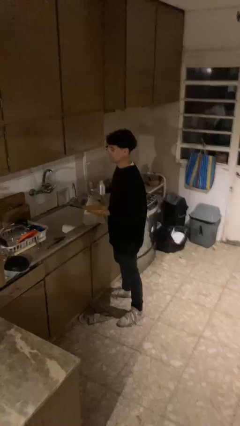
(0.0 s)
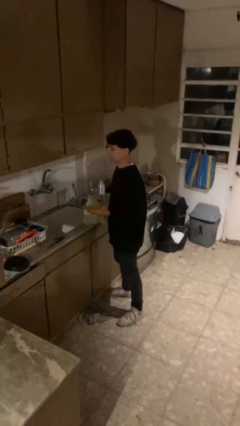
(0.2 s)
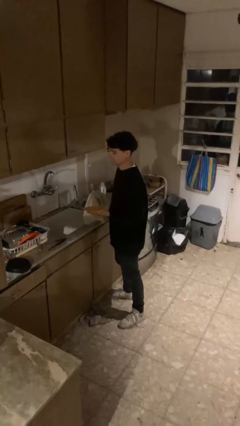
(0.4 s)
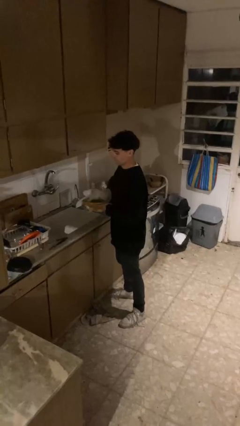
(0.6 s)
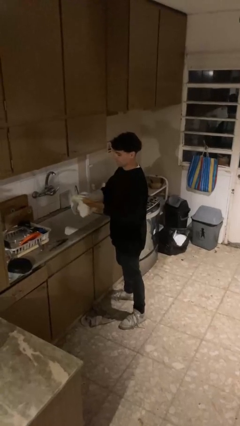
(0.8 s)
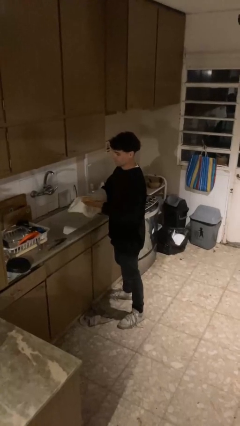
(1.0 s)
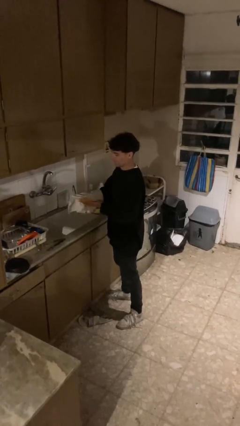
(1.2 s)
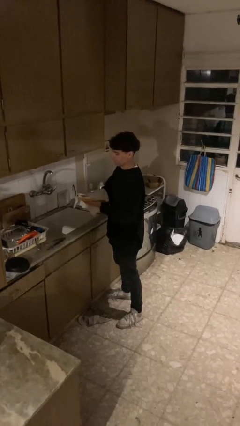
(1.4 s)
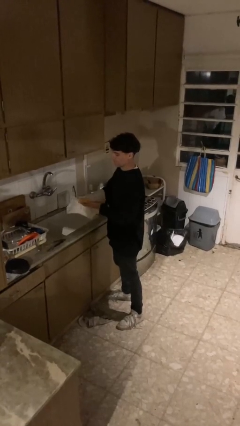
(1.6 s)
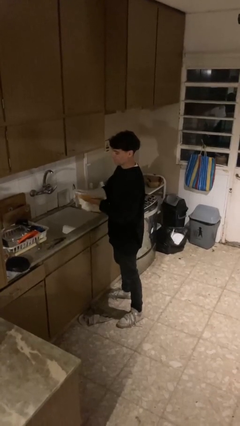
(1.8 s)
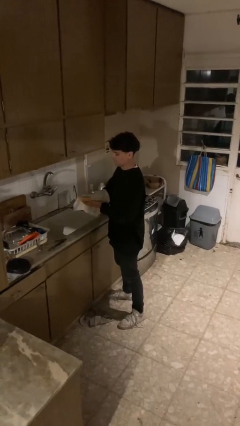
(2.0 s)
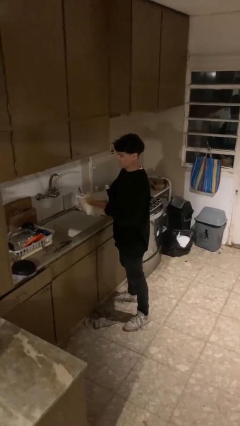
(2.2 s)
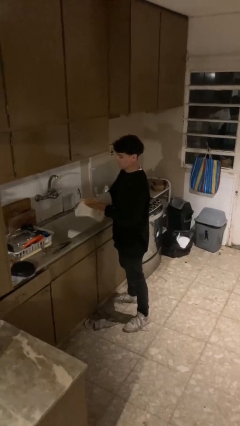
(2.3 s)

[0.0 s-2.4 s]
person dries dish

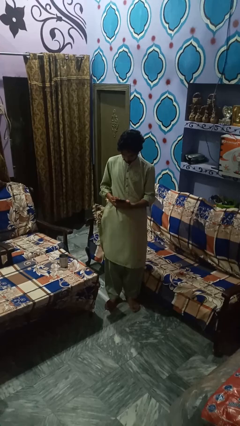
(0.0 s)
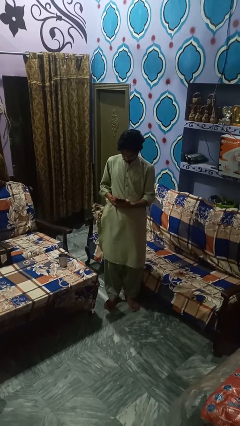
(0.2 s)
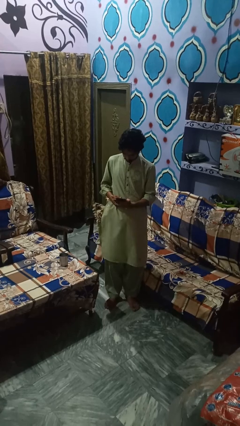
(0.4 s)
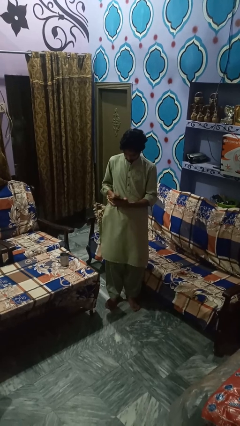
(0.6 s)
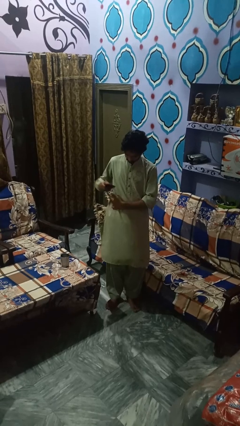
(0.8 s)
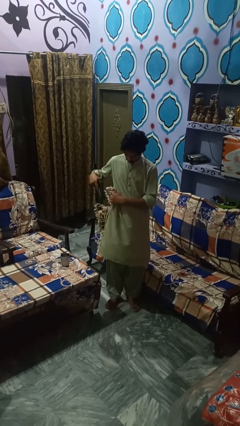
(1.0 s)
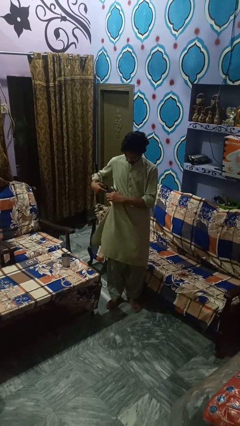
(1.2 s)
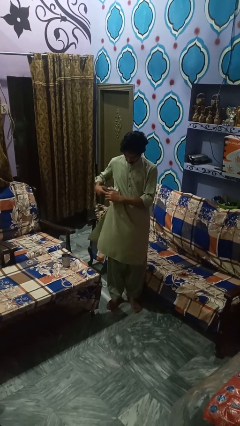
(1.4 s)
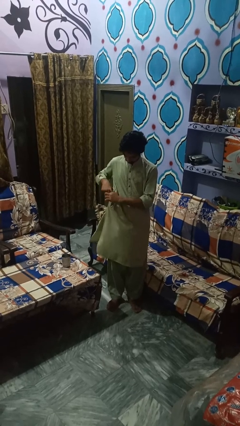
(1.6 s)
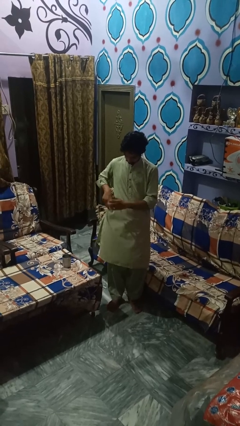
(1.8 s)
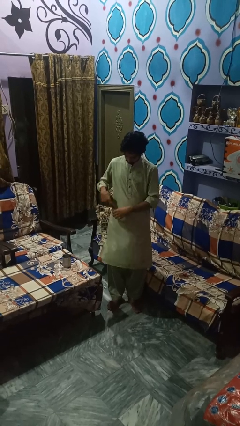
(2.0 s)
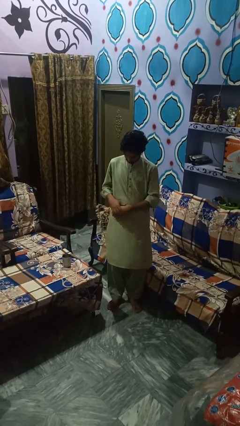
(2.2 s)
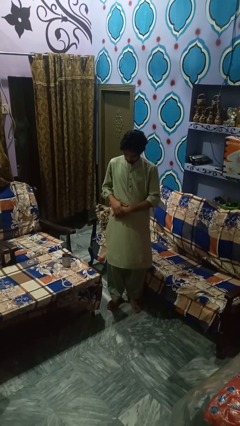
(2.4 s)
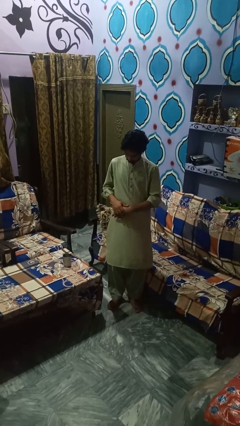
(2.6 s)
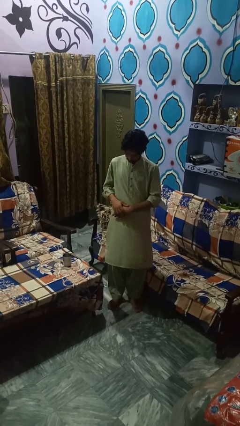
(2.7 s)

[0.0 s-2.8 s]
person puts phone into pocket

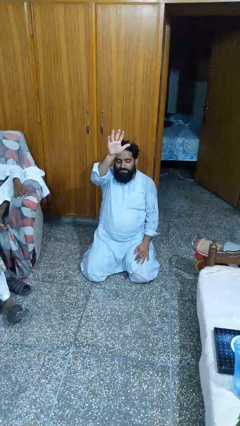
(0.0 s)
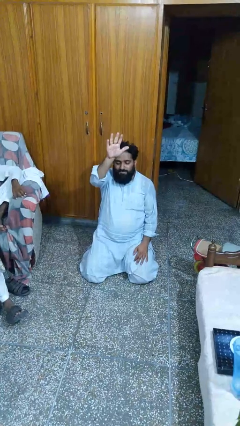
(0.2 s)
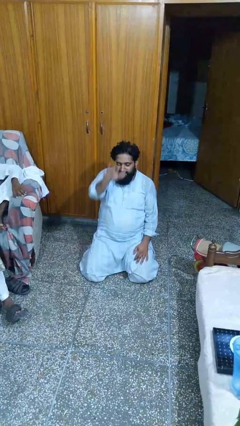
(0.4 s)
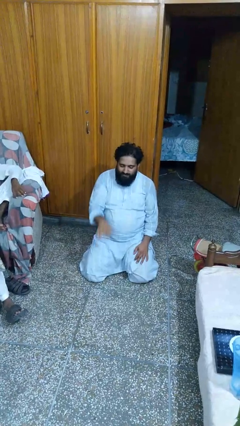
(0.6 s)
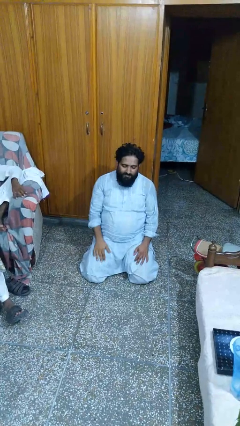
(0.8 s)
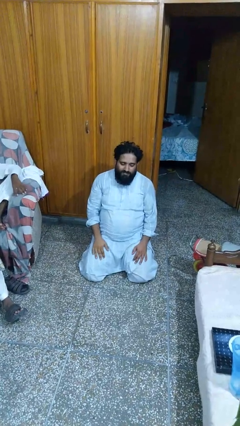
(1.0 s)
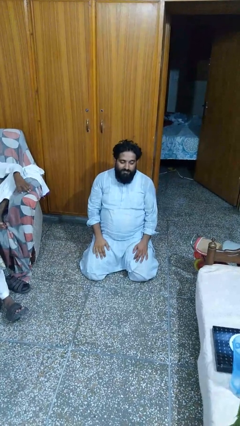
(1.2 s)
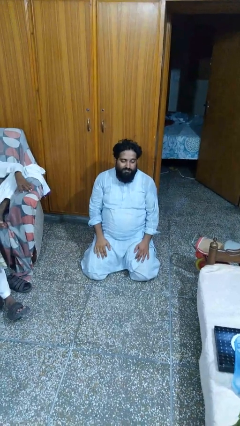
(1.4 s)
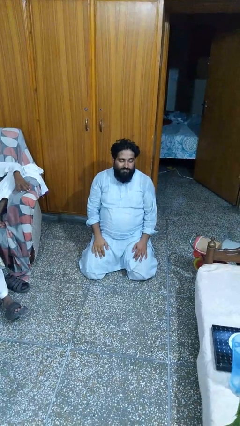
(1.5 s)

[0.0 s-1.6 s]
person gestures lower hand

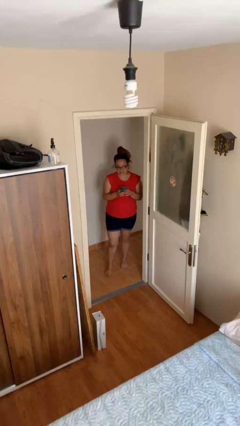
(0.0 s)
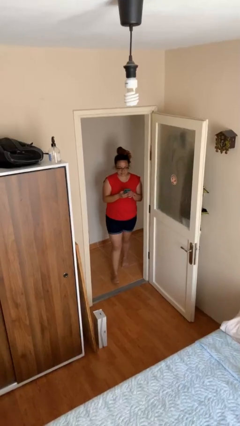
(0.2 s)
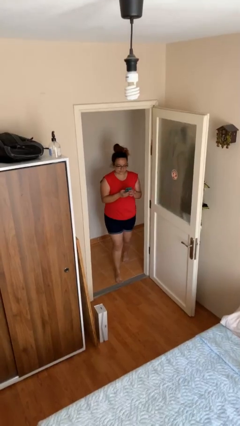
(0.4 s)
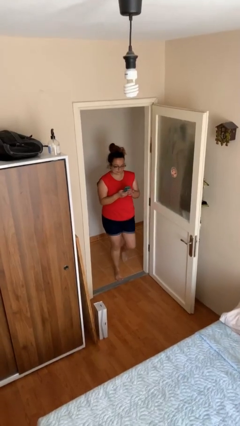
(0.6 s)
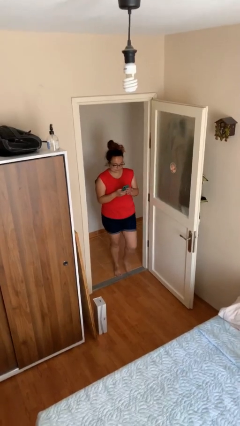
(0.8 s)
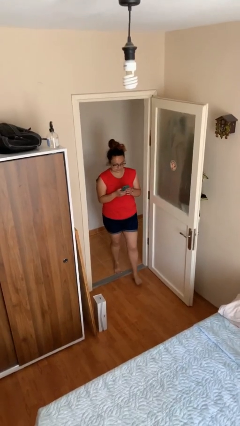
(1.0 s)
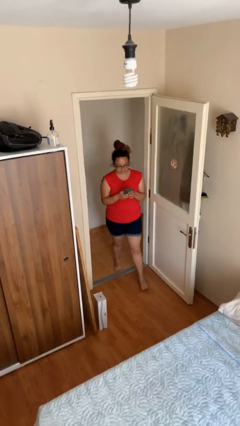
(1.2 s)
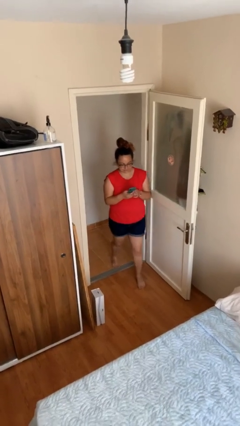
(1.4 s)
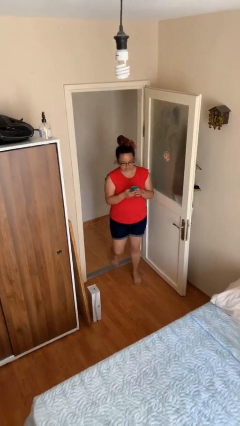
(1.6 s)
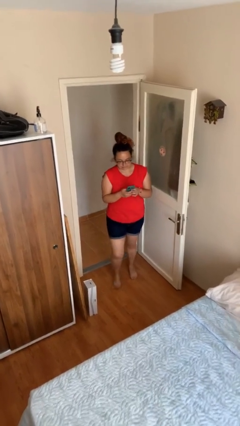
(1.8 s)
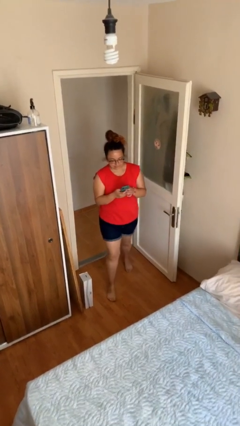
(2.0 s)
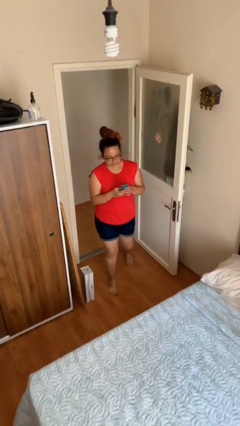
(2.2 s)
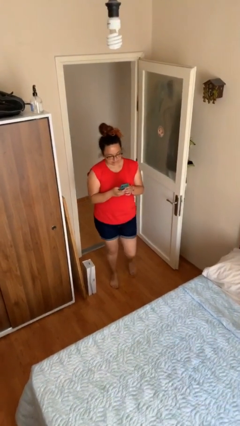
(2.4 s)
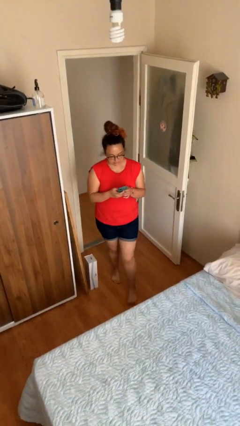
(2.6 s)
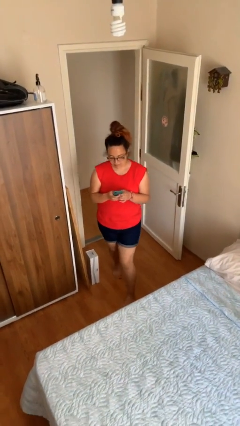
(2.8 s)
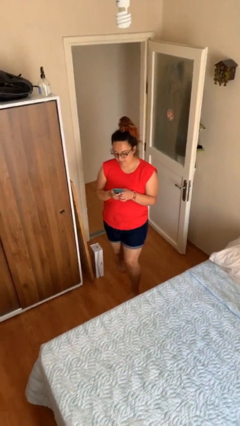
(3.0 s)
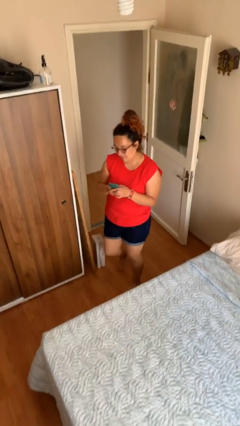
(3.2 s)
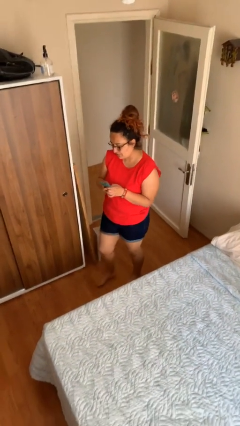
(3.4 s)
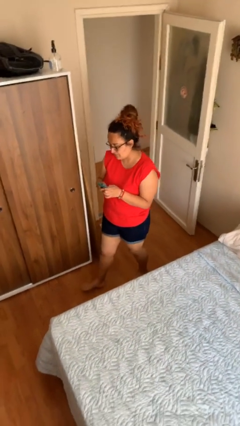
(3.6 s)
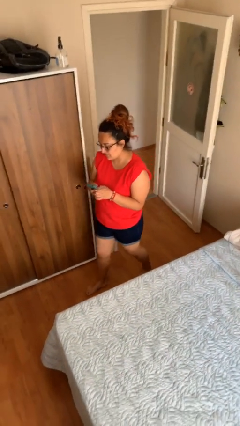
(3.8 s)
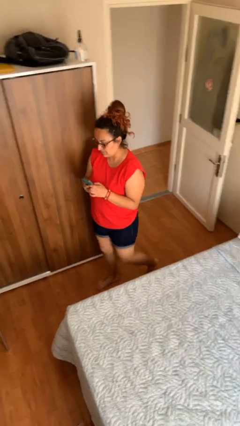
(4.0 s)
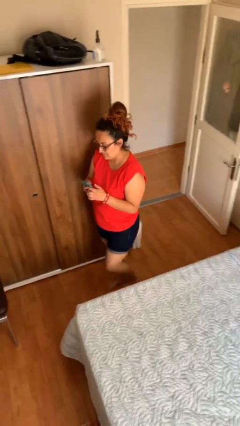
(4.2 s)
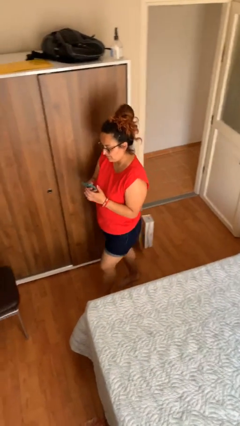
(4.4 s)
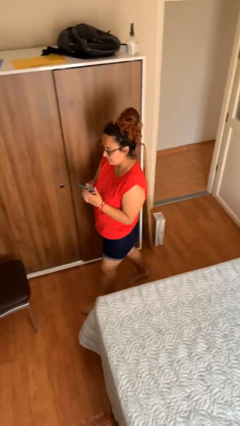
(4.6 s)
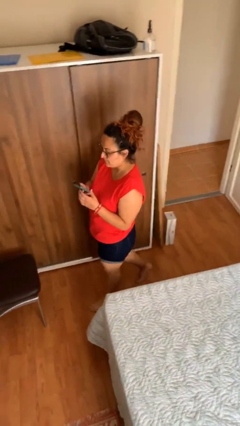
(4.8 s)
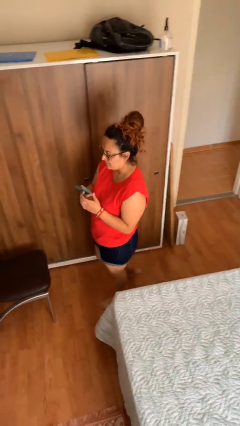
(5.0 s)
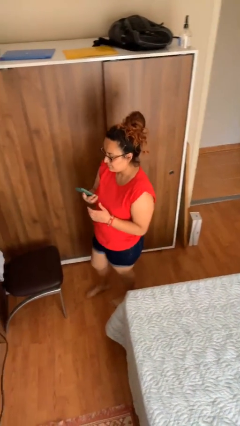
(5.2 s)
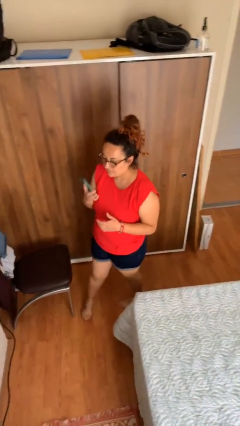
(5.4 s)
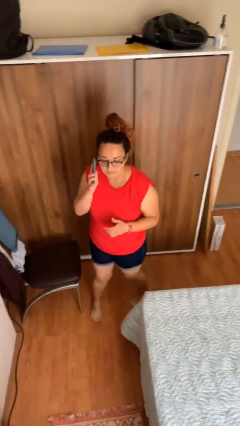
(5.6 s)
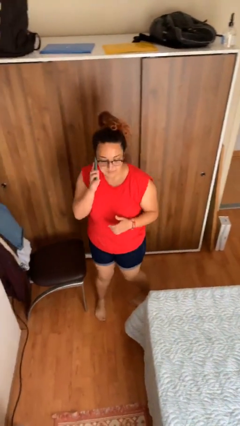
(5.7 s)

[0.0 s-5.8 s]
person texts on phone

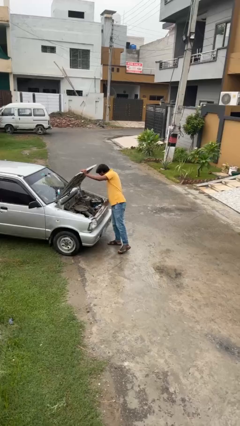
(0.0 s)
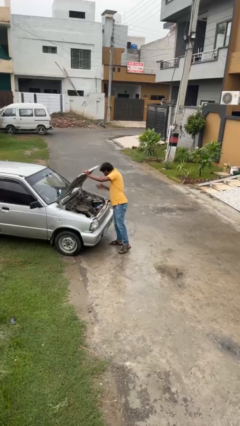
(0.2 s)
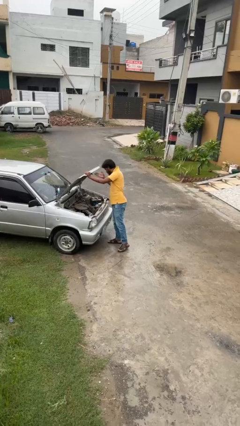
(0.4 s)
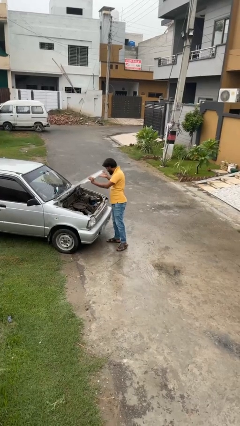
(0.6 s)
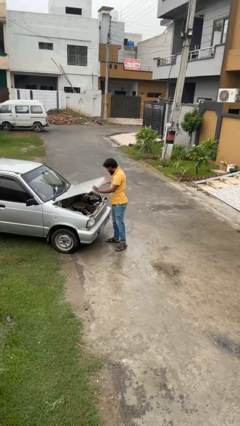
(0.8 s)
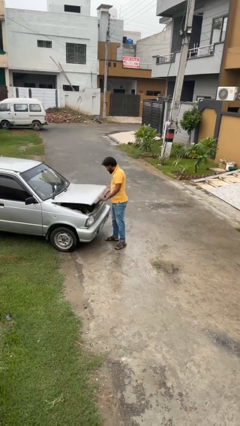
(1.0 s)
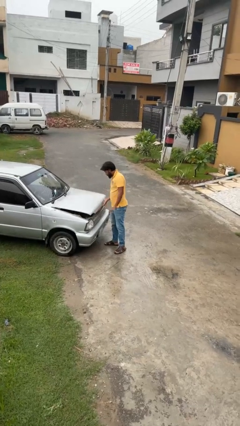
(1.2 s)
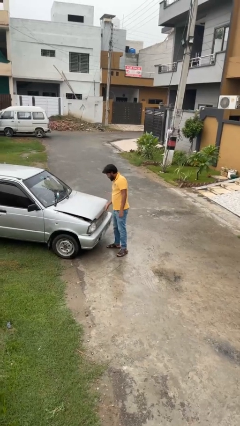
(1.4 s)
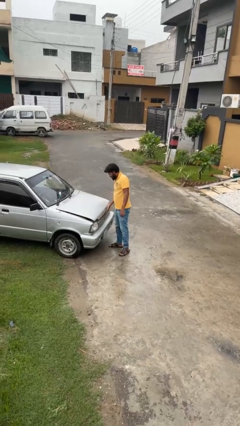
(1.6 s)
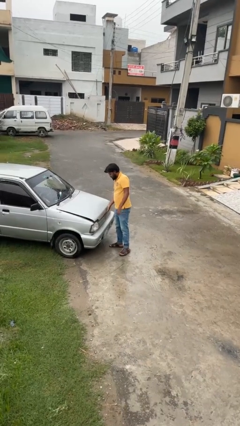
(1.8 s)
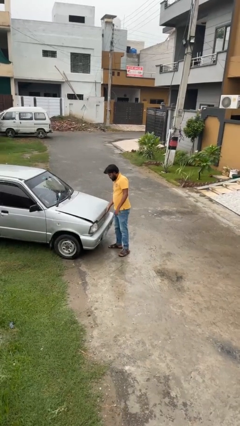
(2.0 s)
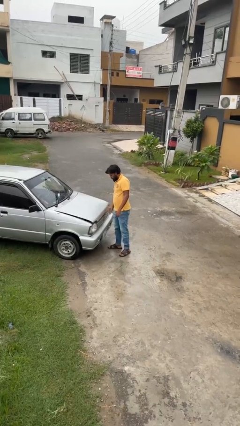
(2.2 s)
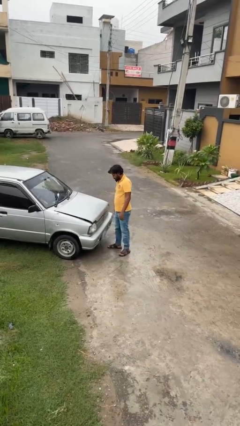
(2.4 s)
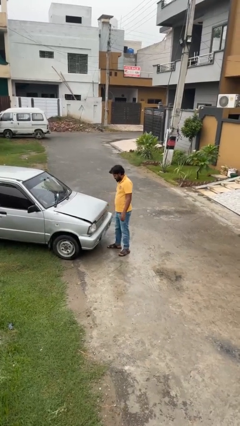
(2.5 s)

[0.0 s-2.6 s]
person closes car hood

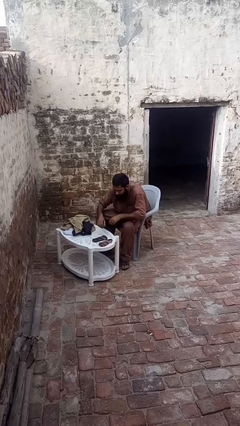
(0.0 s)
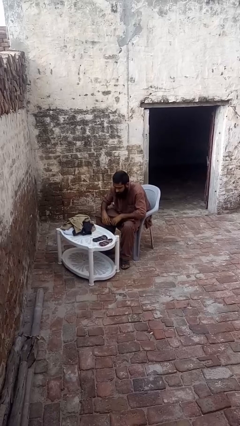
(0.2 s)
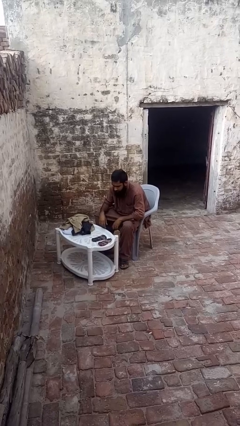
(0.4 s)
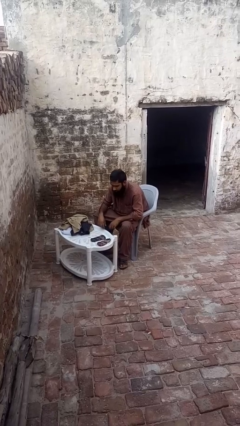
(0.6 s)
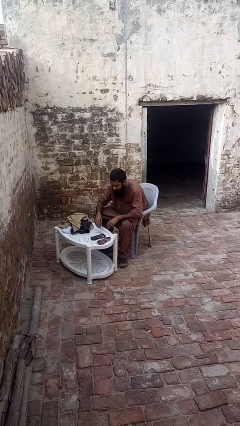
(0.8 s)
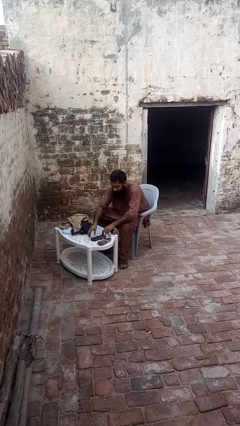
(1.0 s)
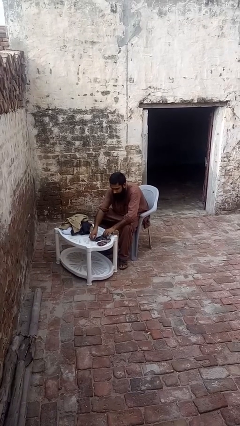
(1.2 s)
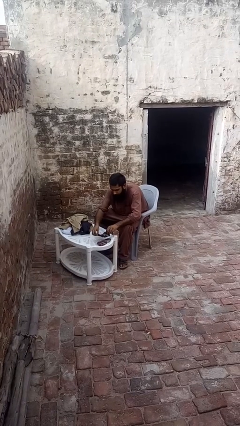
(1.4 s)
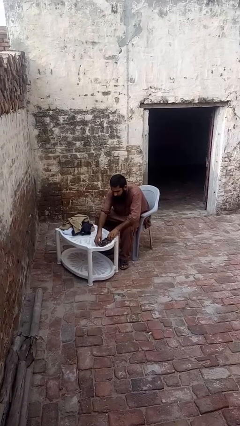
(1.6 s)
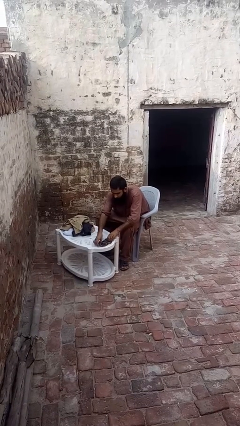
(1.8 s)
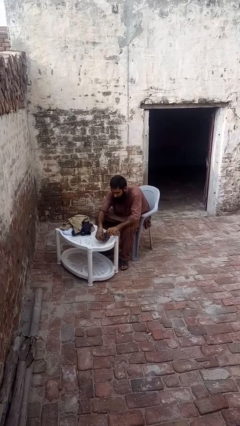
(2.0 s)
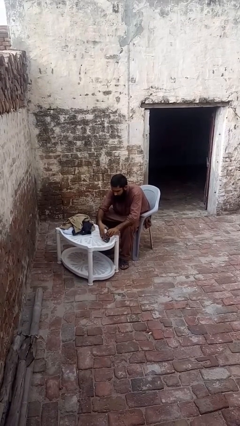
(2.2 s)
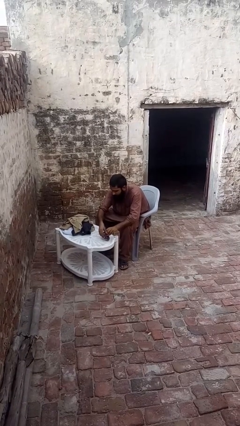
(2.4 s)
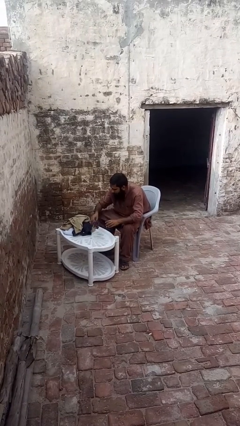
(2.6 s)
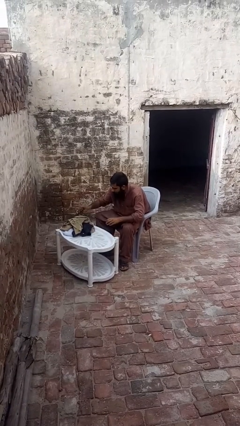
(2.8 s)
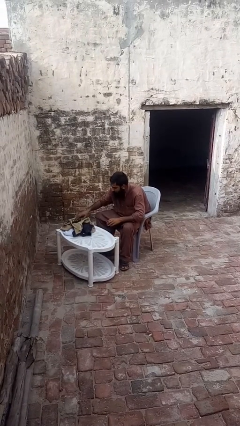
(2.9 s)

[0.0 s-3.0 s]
person folds socks
